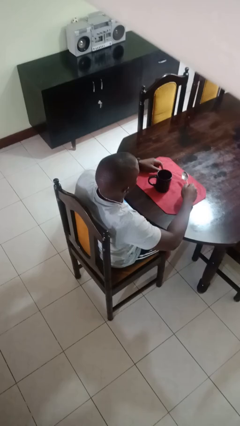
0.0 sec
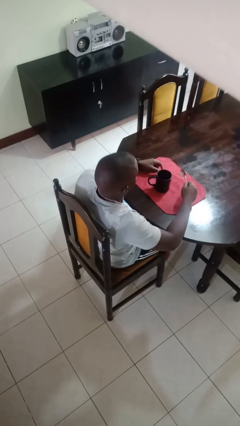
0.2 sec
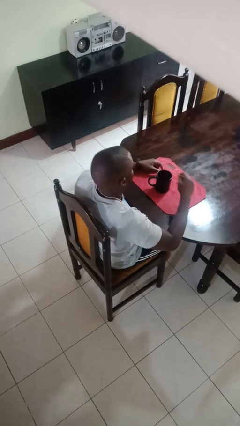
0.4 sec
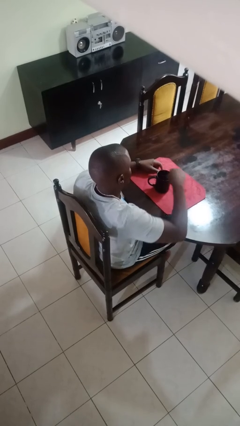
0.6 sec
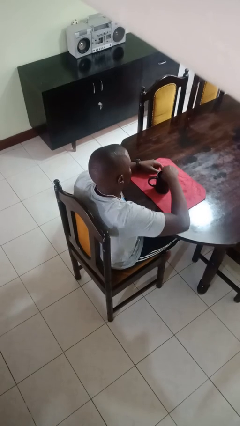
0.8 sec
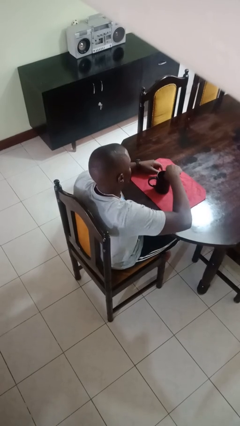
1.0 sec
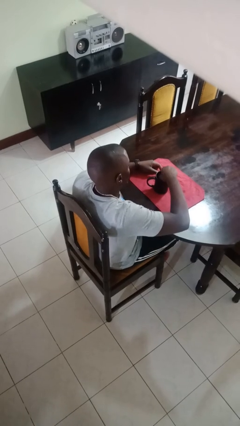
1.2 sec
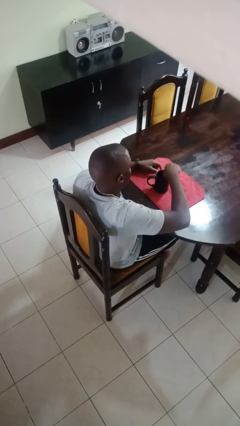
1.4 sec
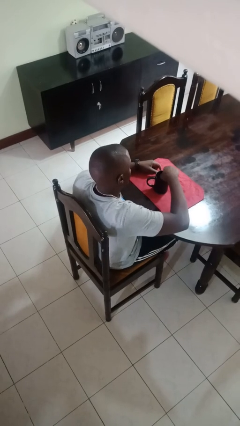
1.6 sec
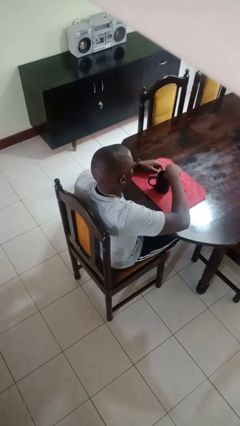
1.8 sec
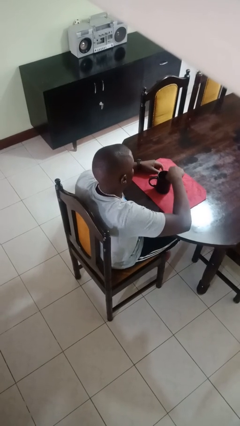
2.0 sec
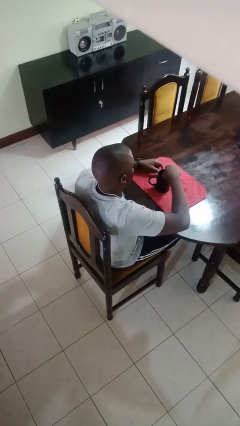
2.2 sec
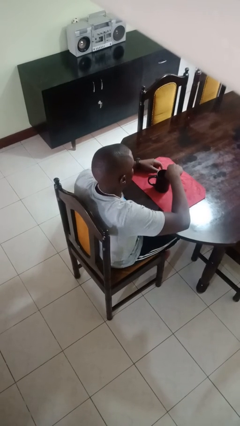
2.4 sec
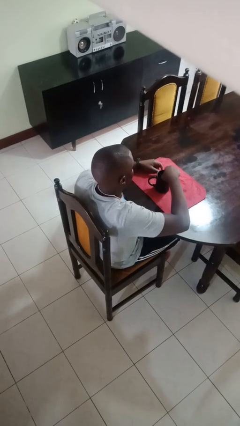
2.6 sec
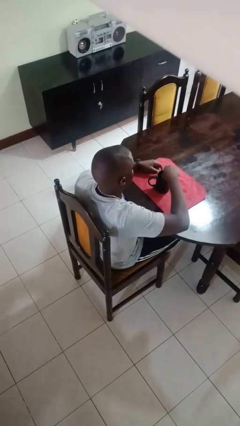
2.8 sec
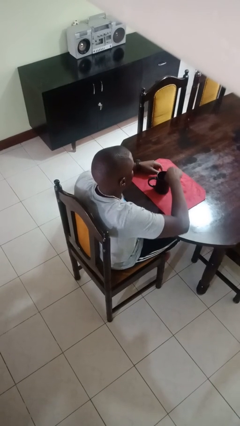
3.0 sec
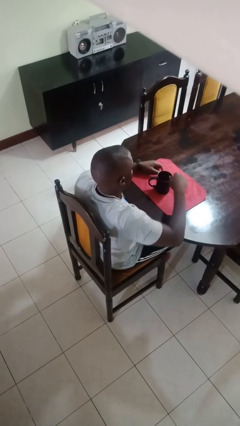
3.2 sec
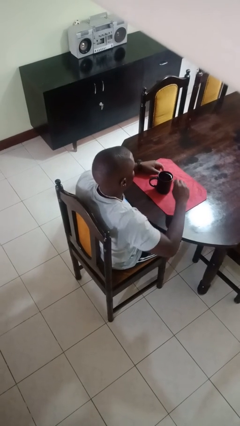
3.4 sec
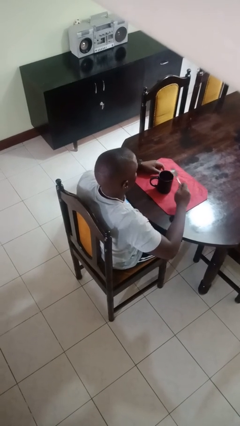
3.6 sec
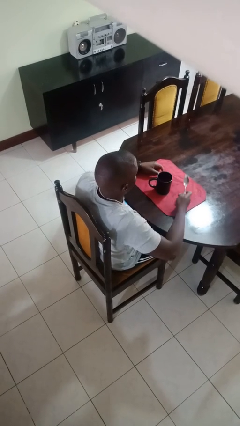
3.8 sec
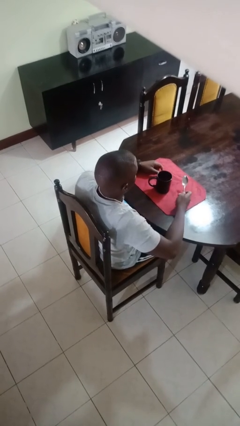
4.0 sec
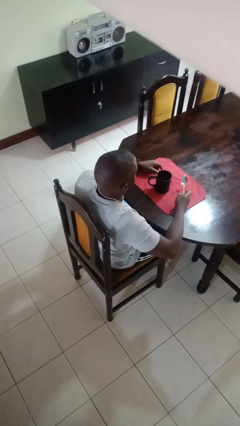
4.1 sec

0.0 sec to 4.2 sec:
person stirs mug

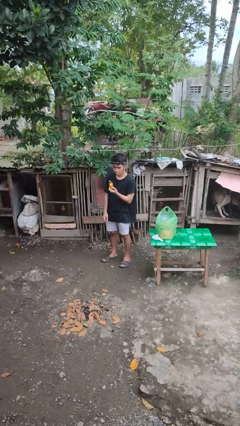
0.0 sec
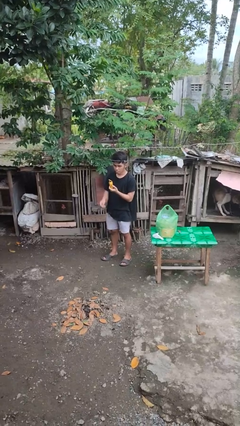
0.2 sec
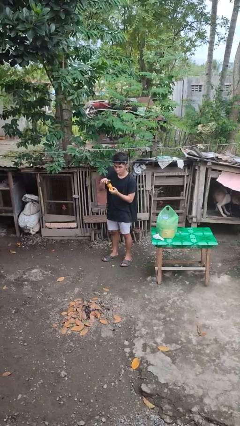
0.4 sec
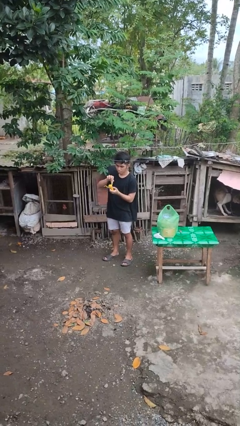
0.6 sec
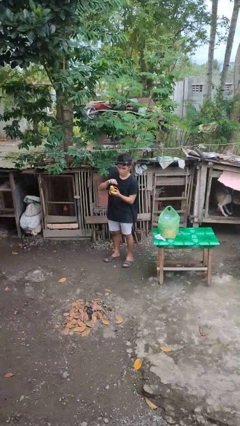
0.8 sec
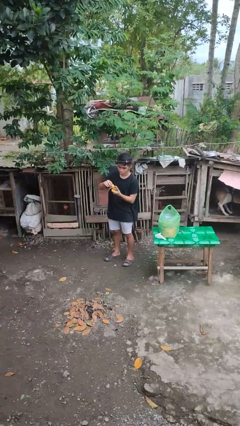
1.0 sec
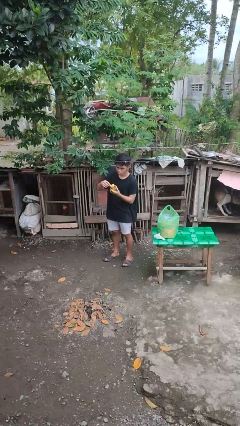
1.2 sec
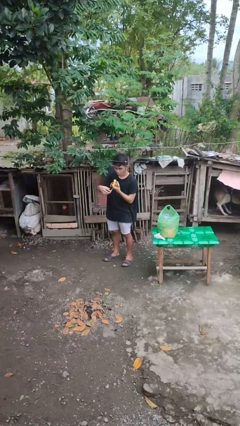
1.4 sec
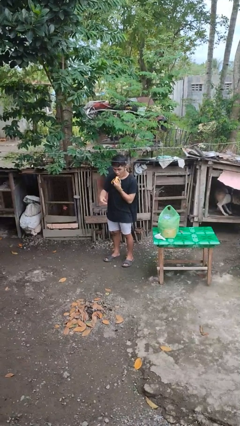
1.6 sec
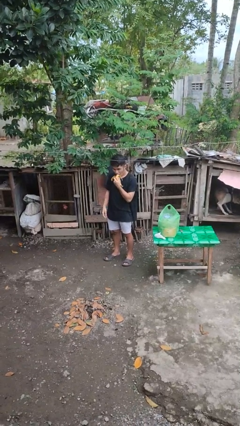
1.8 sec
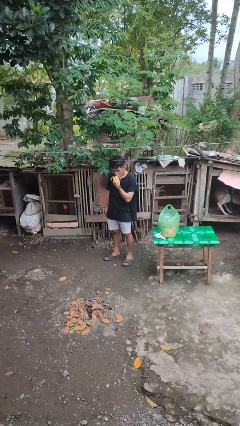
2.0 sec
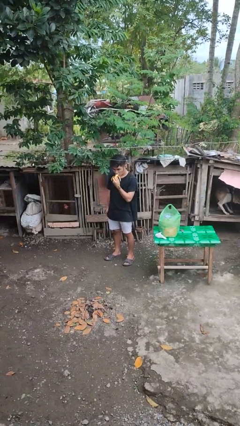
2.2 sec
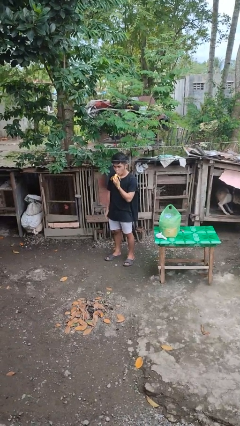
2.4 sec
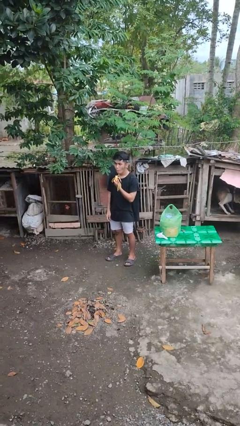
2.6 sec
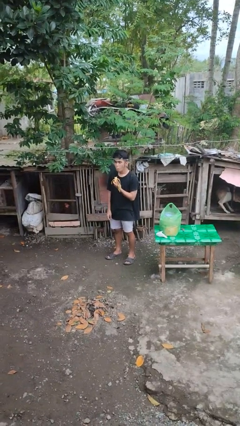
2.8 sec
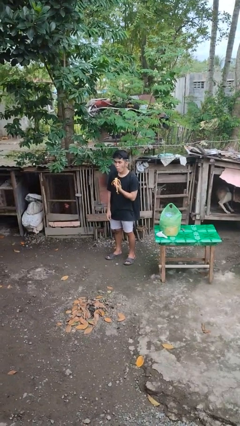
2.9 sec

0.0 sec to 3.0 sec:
person eats banana

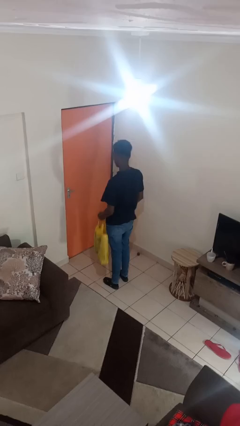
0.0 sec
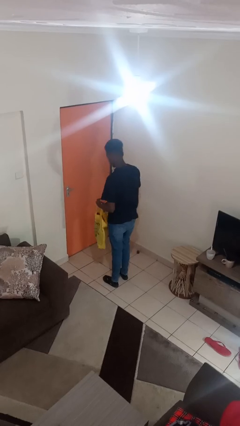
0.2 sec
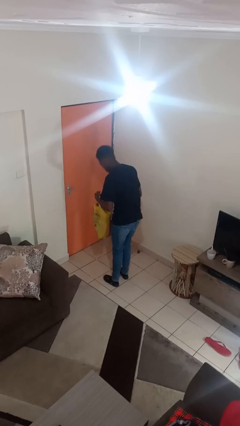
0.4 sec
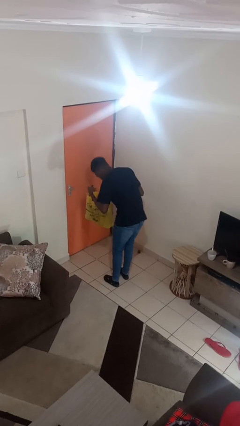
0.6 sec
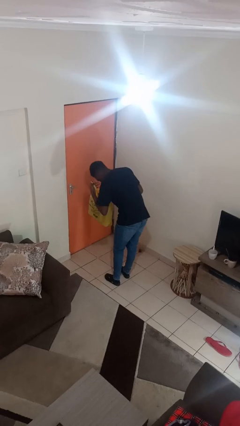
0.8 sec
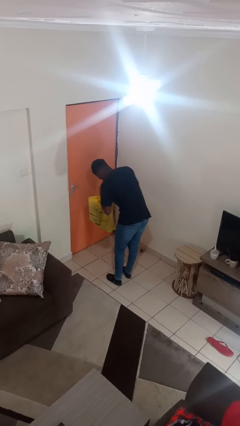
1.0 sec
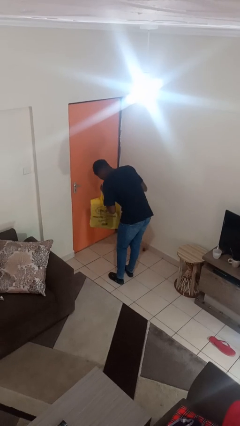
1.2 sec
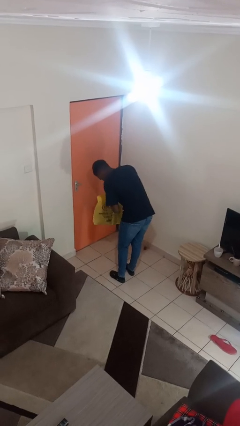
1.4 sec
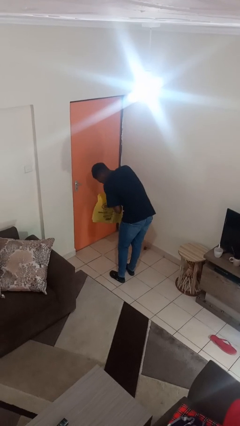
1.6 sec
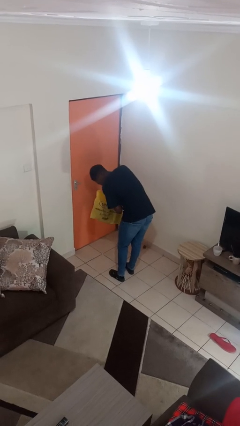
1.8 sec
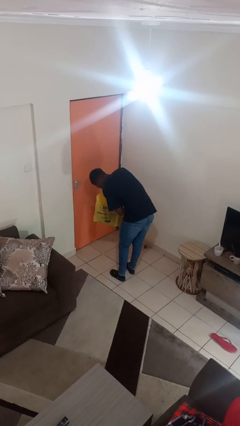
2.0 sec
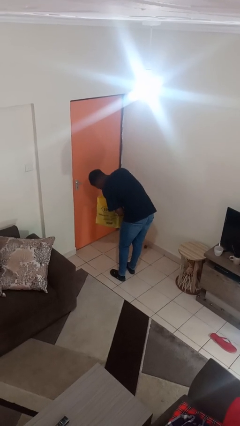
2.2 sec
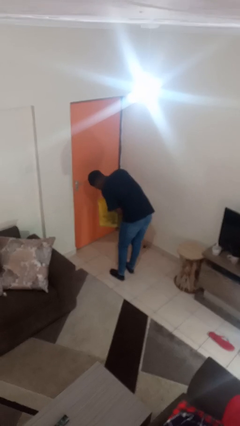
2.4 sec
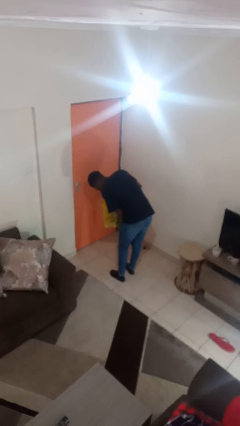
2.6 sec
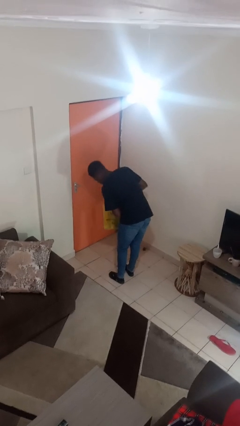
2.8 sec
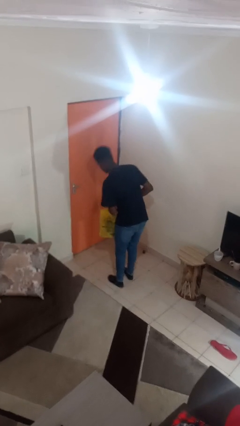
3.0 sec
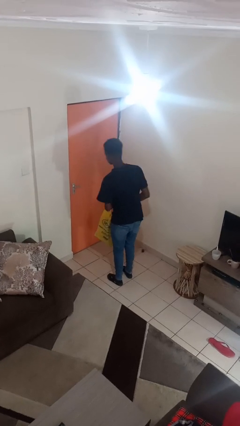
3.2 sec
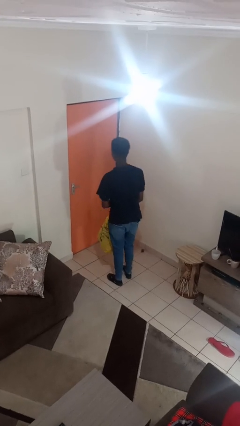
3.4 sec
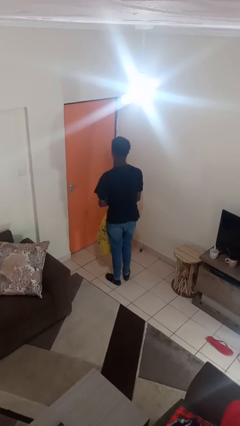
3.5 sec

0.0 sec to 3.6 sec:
person searches in bag

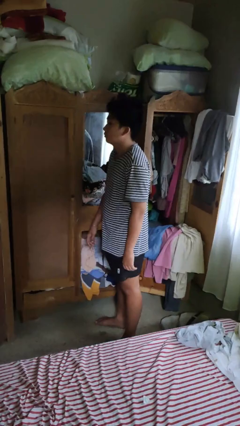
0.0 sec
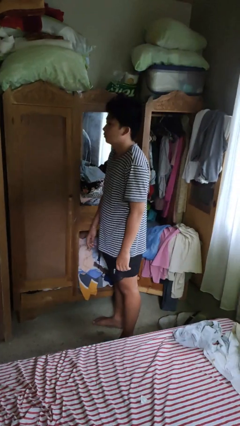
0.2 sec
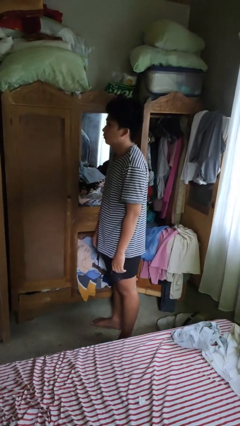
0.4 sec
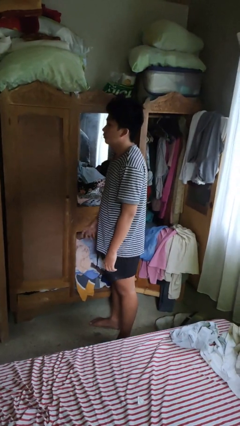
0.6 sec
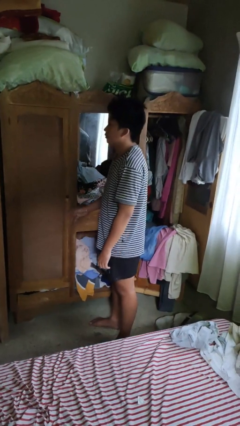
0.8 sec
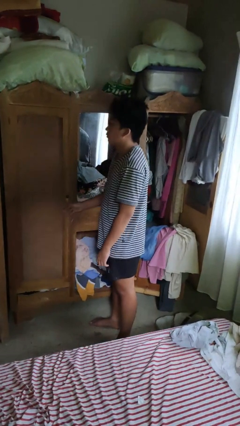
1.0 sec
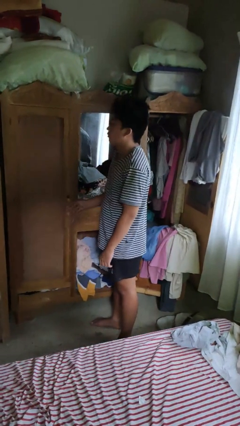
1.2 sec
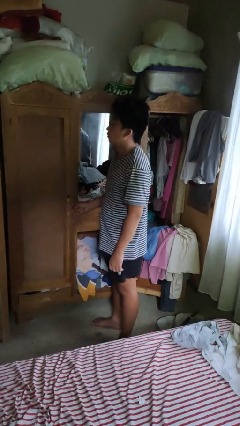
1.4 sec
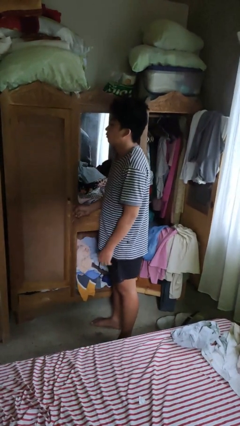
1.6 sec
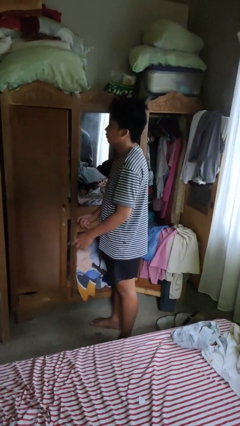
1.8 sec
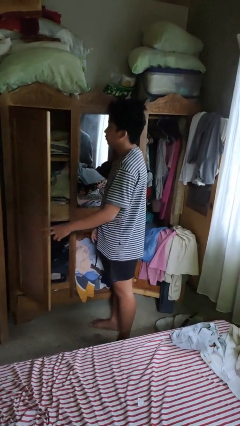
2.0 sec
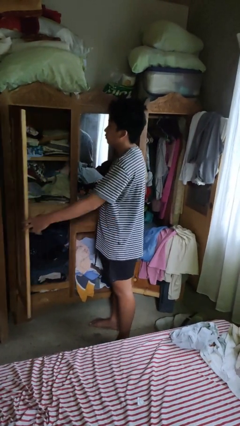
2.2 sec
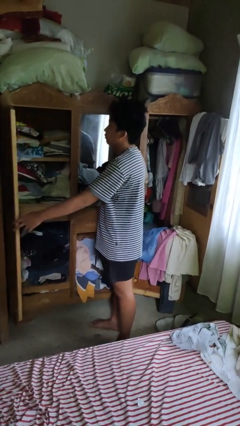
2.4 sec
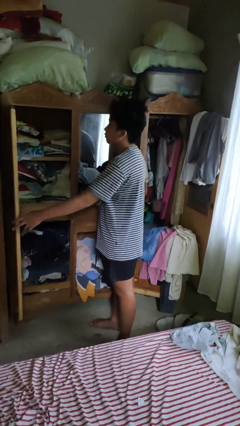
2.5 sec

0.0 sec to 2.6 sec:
person opens dresser drawer

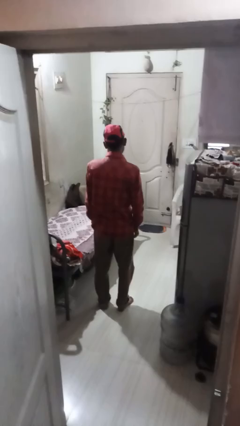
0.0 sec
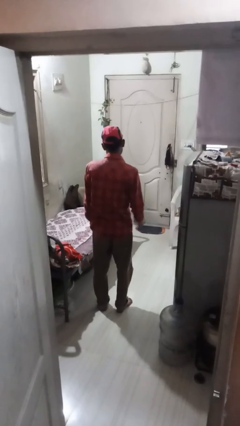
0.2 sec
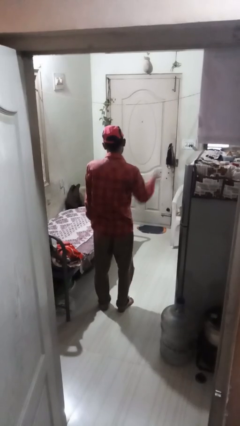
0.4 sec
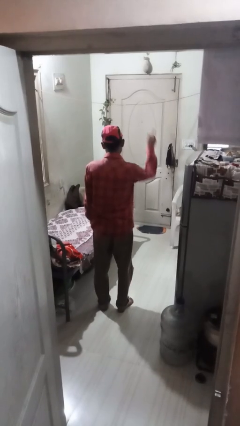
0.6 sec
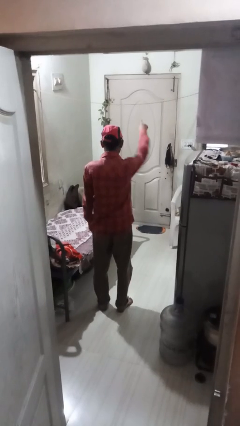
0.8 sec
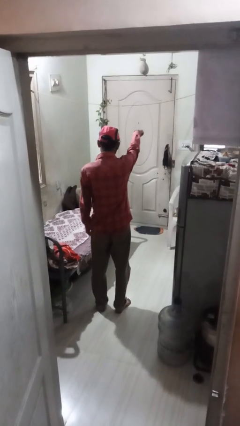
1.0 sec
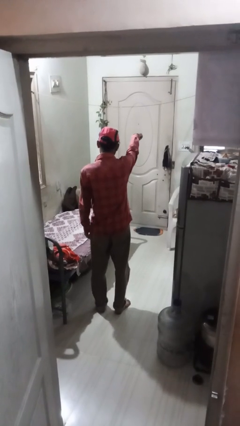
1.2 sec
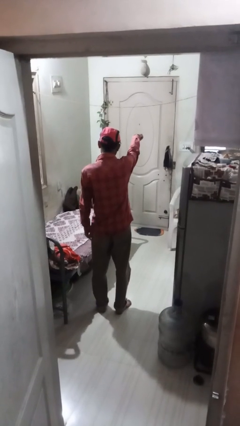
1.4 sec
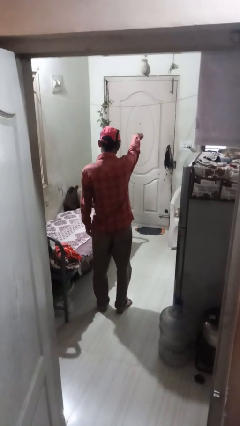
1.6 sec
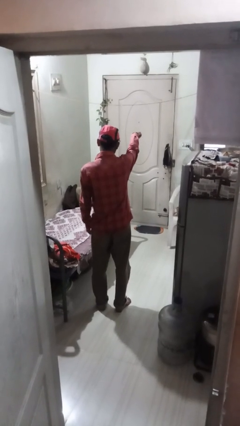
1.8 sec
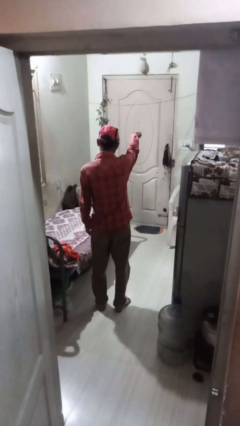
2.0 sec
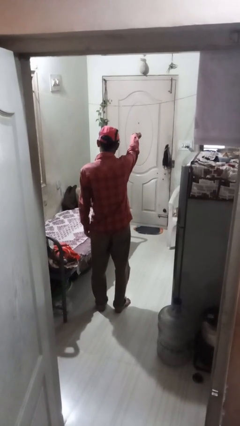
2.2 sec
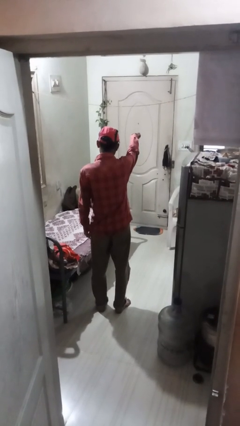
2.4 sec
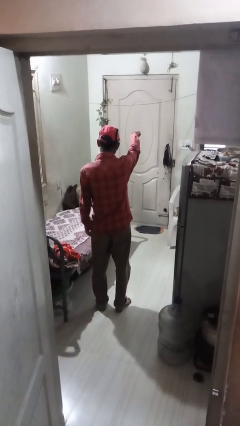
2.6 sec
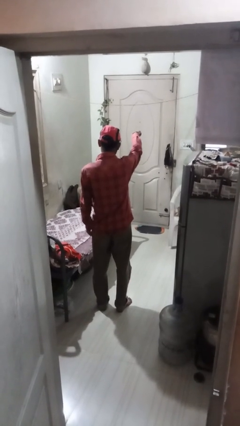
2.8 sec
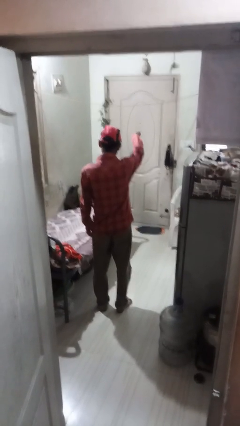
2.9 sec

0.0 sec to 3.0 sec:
person points at person

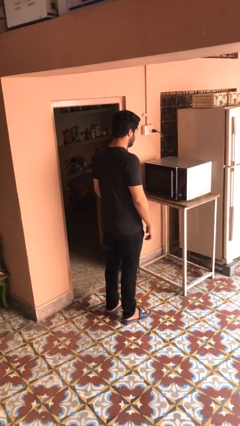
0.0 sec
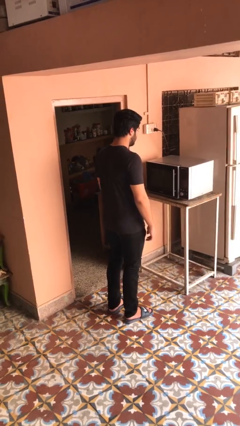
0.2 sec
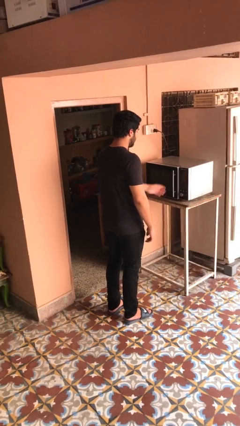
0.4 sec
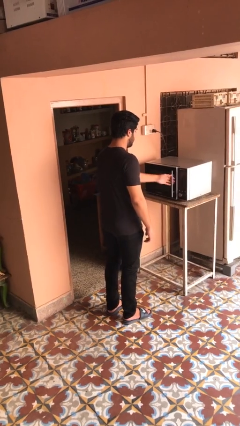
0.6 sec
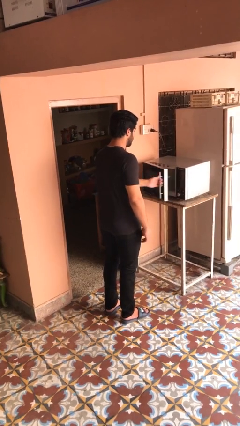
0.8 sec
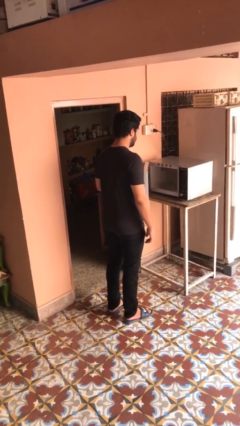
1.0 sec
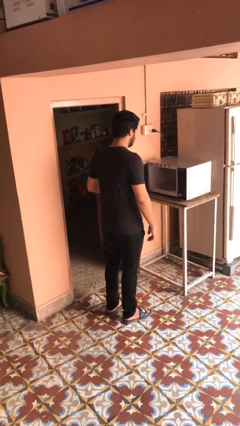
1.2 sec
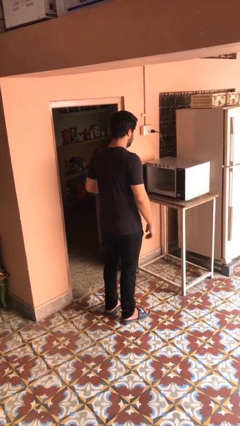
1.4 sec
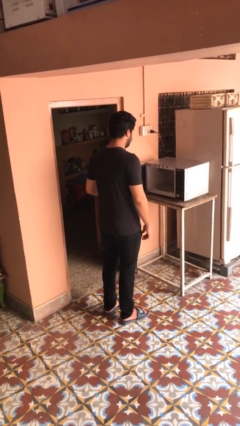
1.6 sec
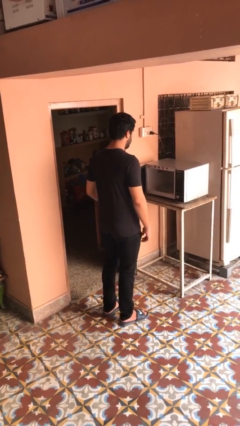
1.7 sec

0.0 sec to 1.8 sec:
person opens microwave
